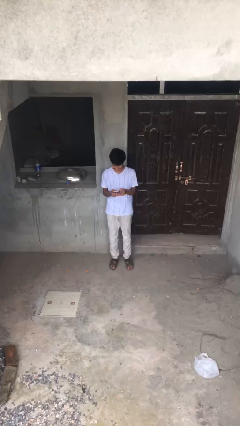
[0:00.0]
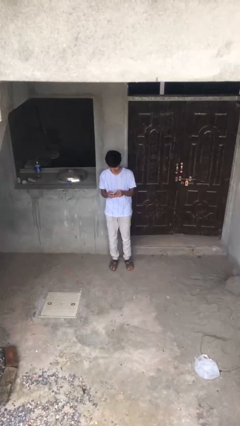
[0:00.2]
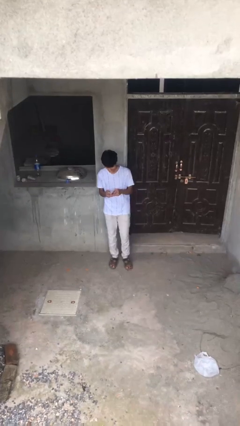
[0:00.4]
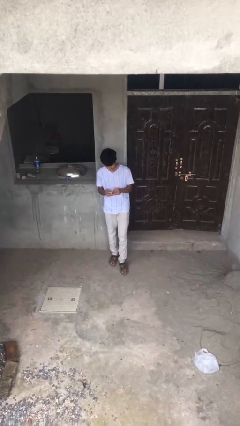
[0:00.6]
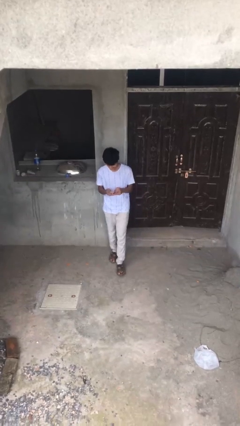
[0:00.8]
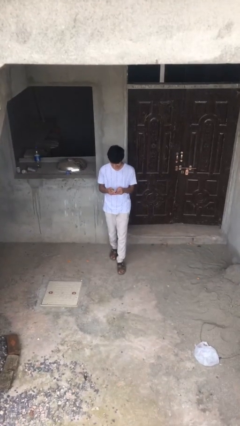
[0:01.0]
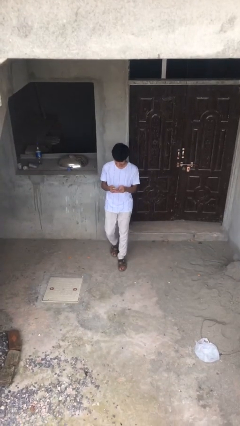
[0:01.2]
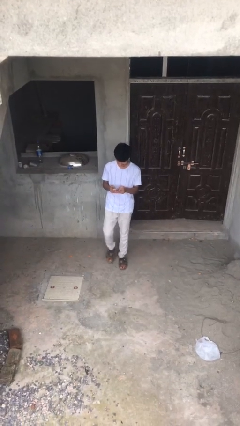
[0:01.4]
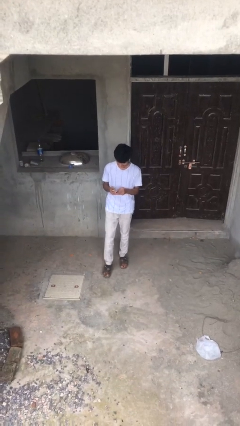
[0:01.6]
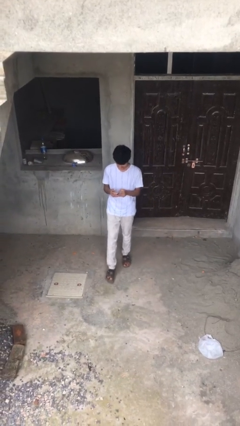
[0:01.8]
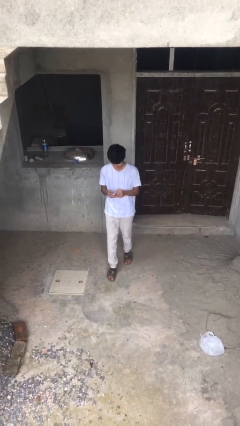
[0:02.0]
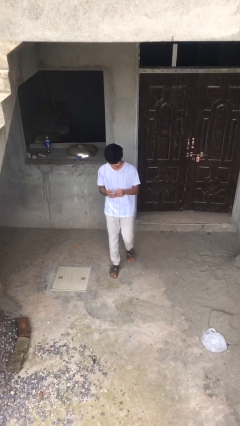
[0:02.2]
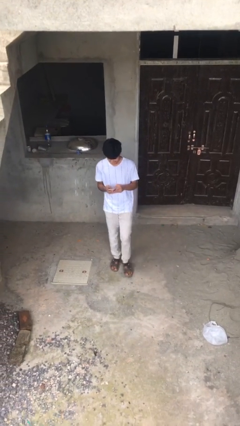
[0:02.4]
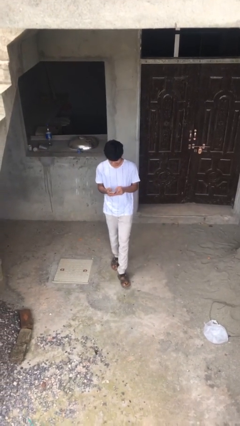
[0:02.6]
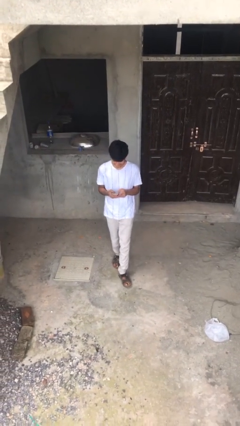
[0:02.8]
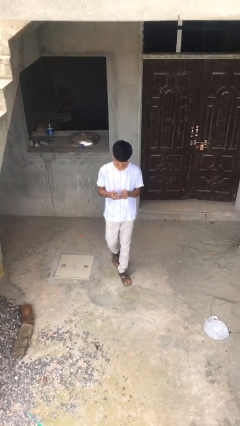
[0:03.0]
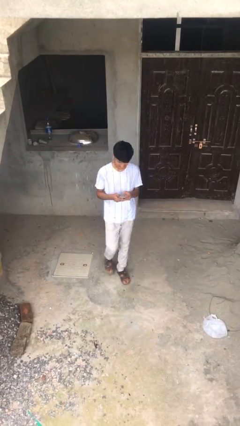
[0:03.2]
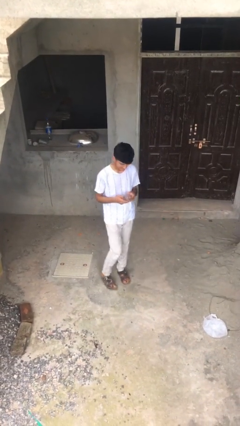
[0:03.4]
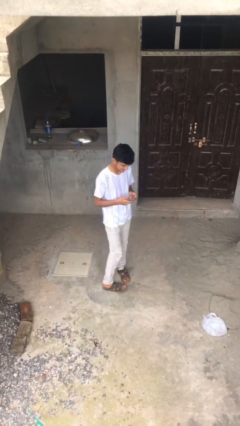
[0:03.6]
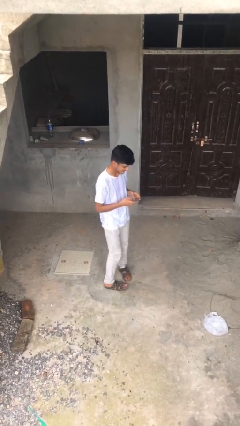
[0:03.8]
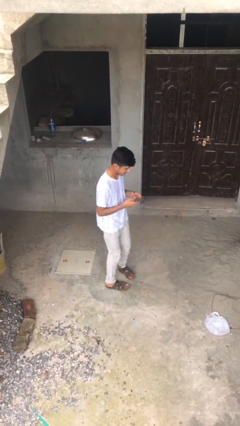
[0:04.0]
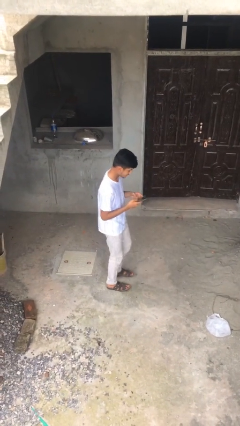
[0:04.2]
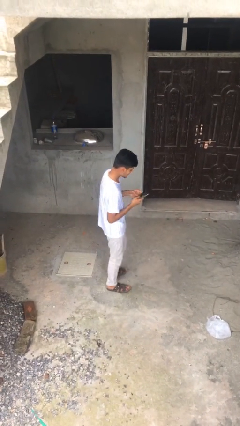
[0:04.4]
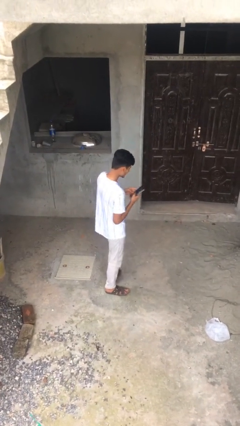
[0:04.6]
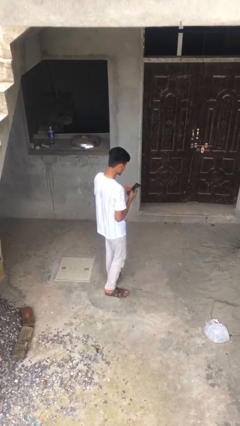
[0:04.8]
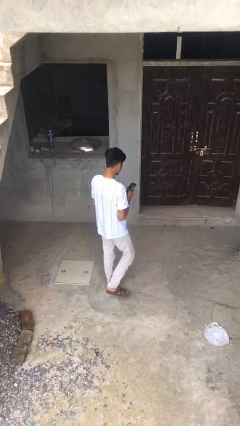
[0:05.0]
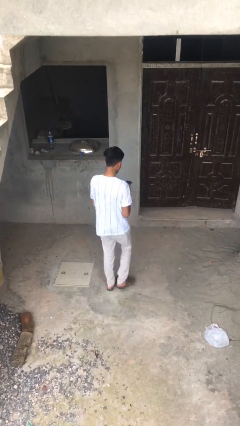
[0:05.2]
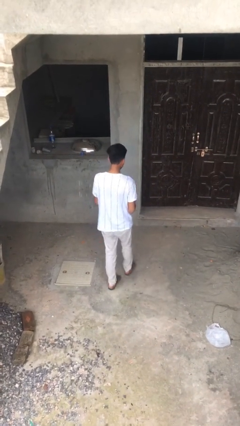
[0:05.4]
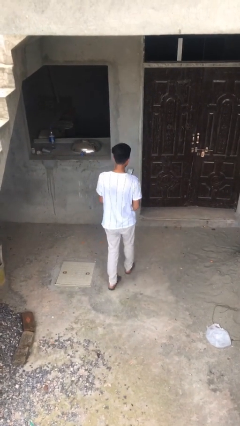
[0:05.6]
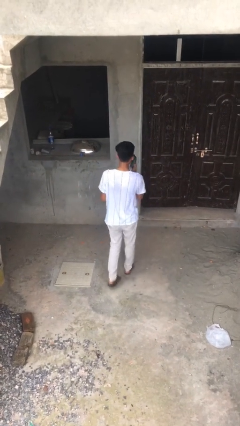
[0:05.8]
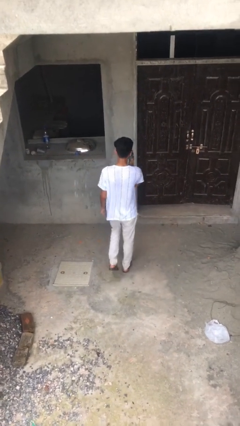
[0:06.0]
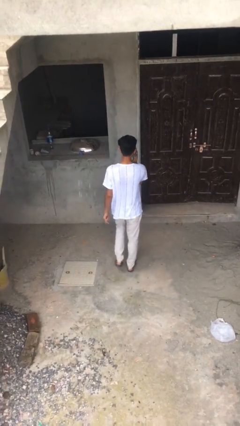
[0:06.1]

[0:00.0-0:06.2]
person texts on phone

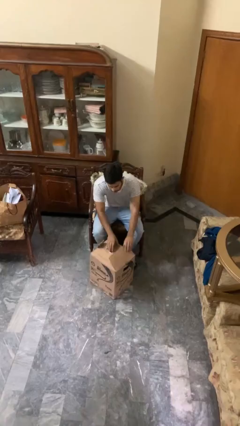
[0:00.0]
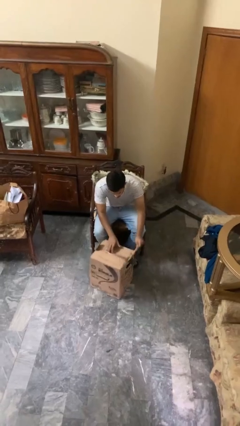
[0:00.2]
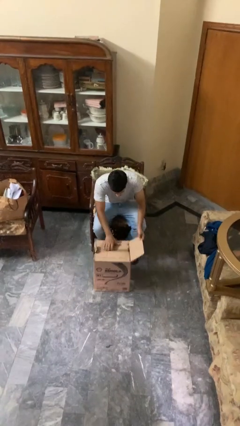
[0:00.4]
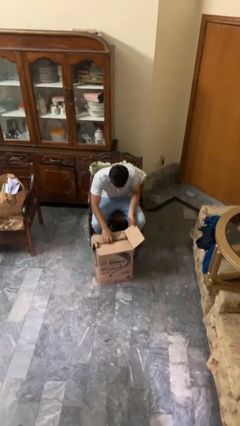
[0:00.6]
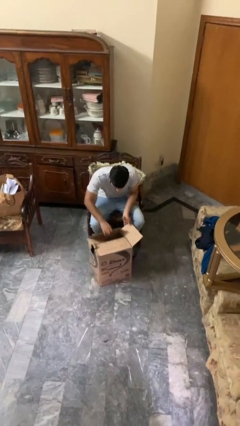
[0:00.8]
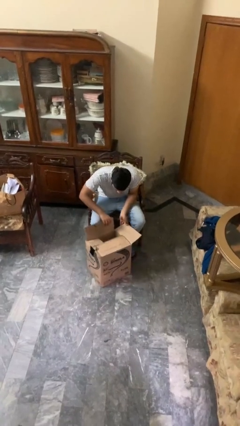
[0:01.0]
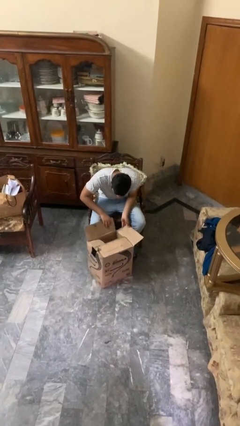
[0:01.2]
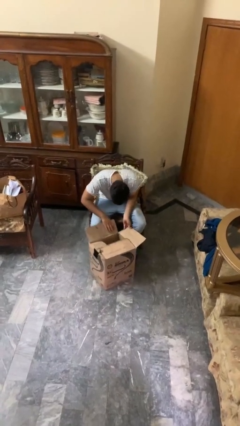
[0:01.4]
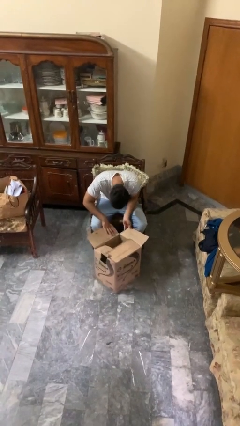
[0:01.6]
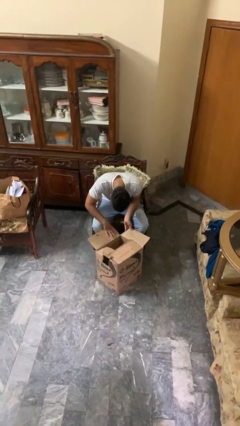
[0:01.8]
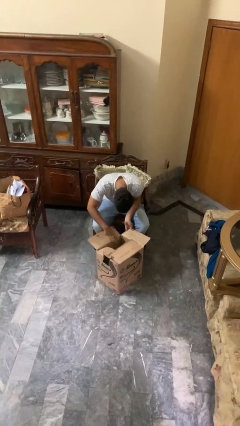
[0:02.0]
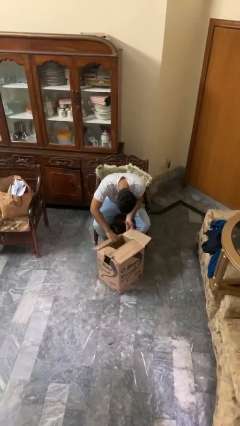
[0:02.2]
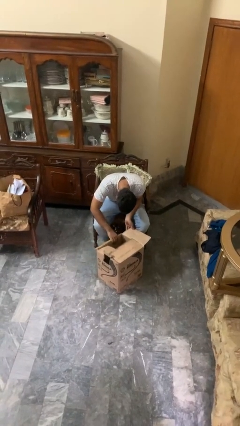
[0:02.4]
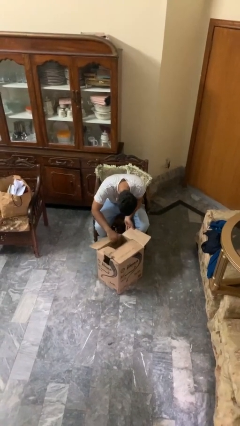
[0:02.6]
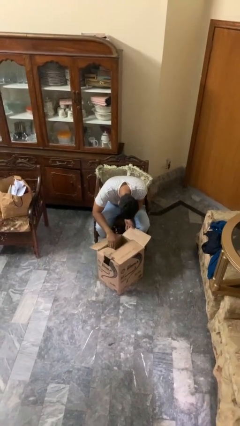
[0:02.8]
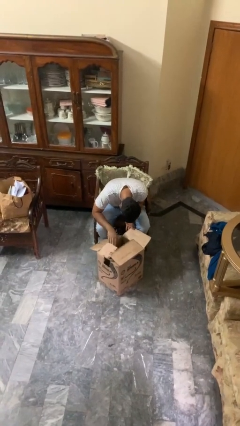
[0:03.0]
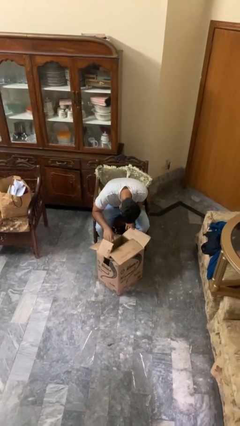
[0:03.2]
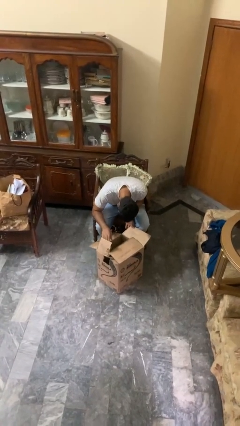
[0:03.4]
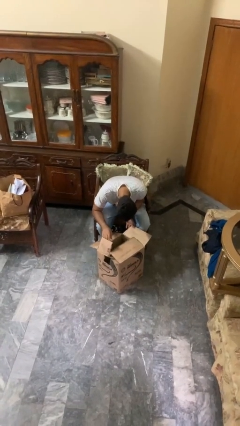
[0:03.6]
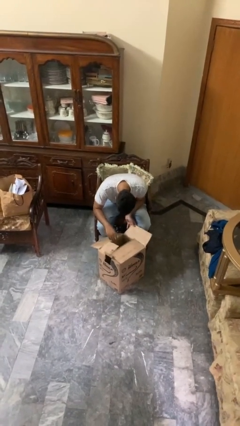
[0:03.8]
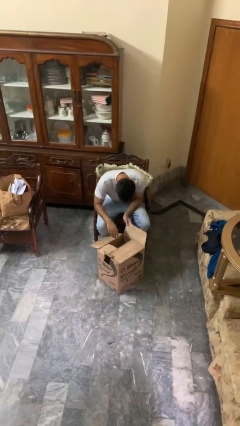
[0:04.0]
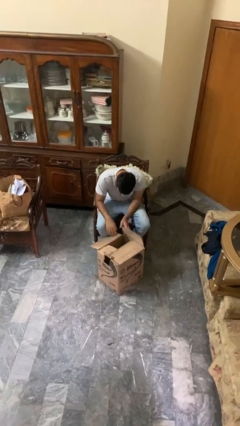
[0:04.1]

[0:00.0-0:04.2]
person searches in box

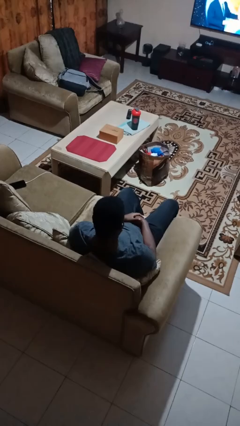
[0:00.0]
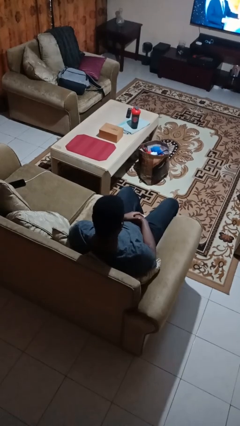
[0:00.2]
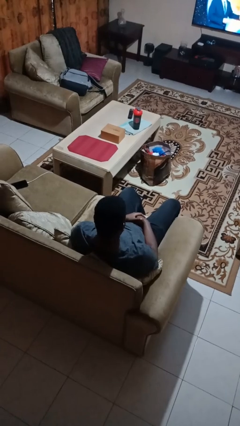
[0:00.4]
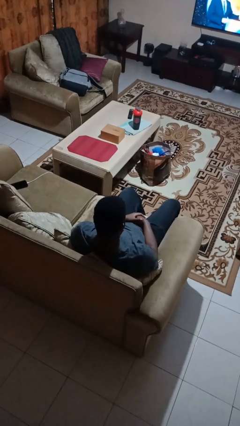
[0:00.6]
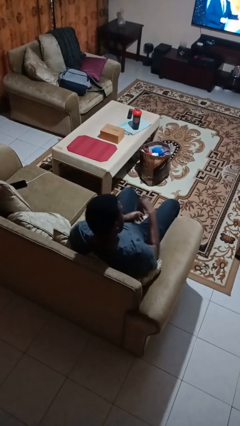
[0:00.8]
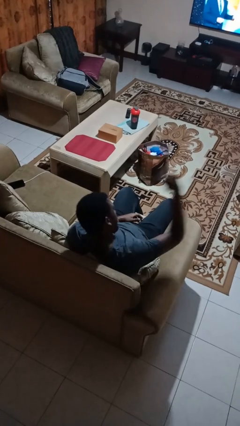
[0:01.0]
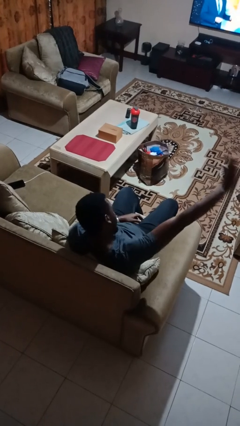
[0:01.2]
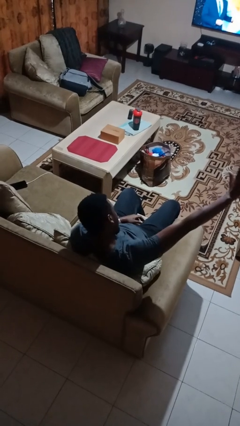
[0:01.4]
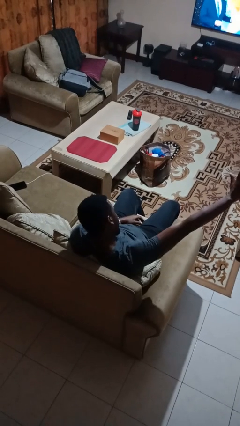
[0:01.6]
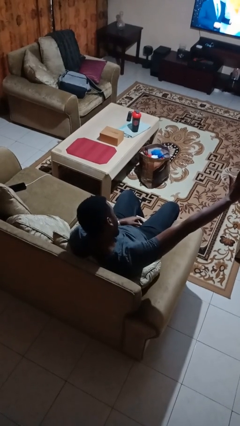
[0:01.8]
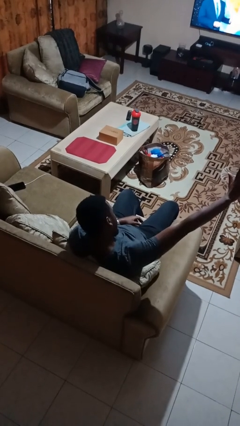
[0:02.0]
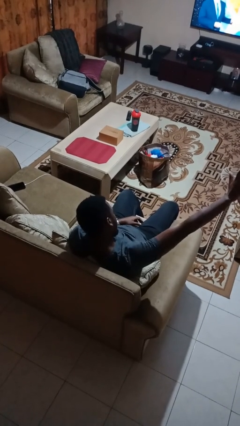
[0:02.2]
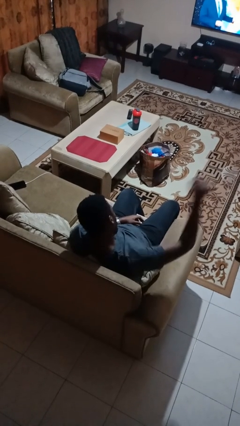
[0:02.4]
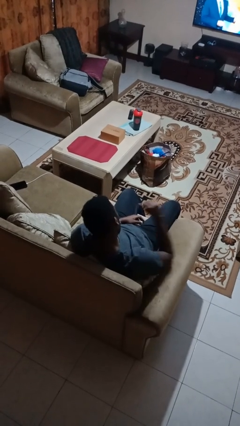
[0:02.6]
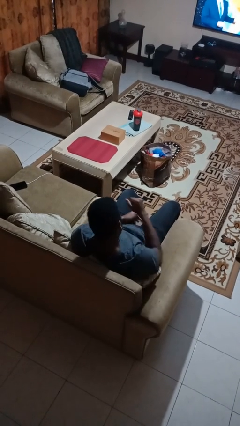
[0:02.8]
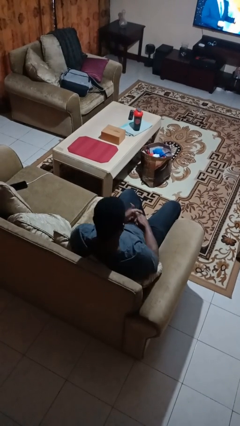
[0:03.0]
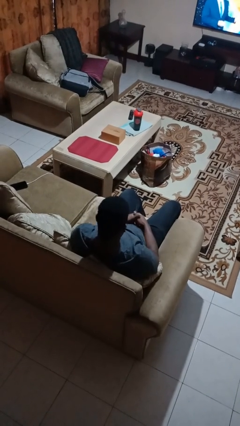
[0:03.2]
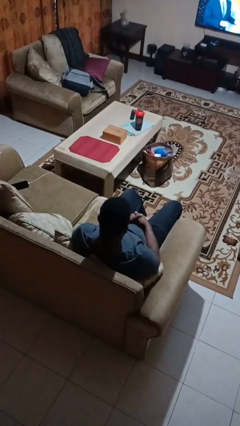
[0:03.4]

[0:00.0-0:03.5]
person gestures stop

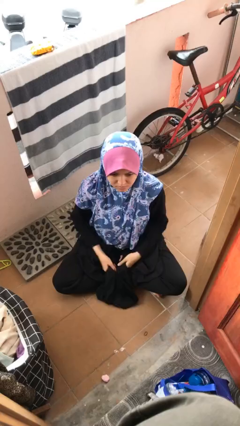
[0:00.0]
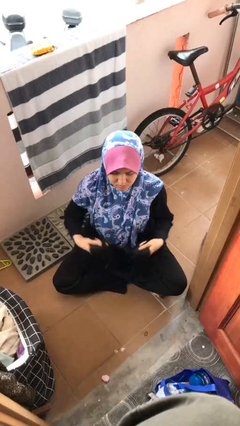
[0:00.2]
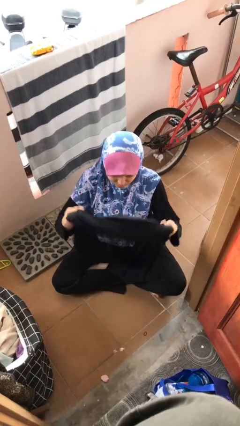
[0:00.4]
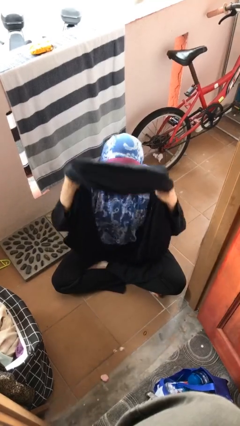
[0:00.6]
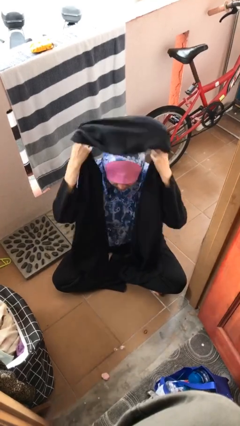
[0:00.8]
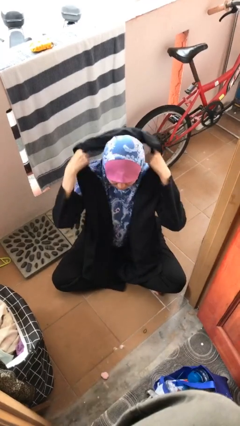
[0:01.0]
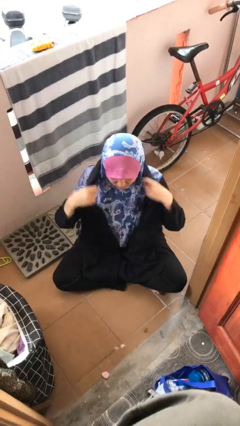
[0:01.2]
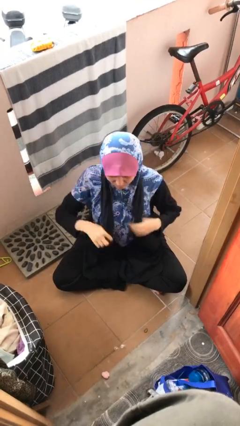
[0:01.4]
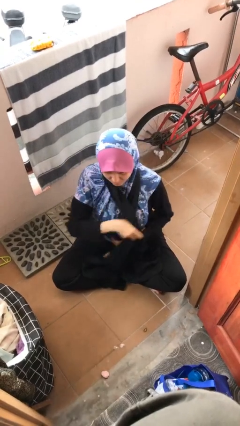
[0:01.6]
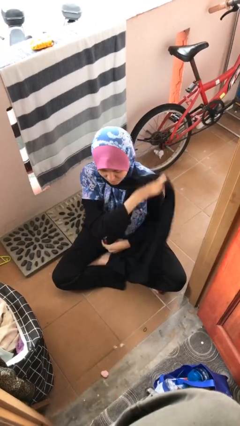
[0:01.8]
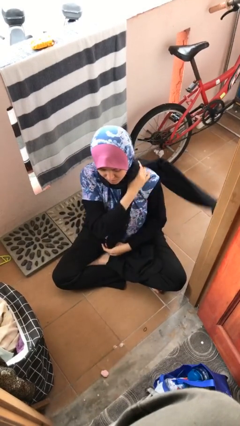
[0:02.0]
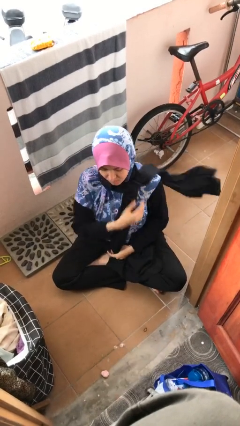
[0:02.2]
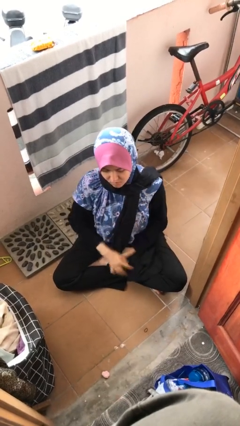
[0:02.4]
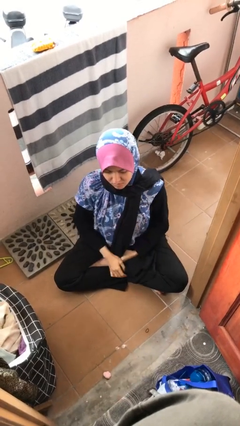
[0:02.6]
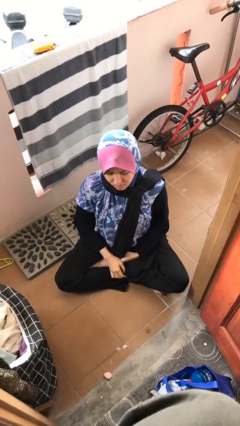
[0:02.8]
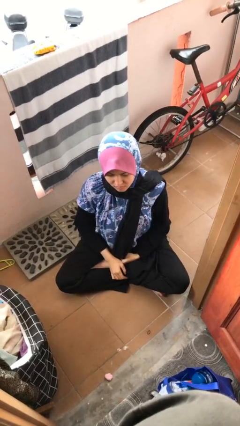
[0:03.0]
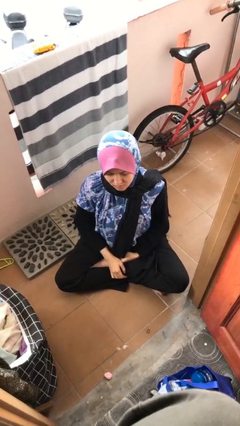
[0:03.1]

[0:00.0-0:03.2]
person puts on scarf

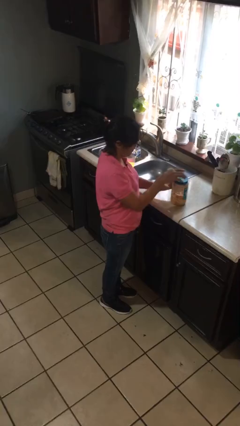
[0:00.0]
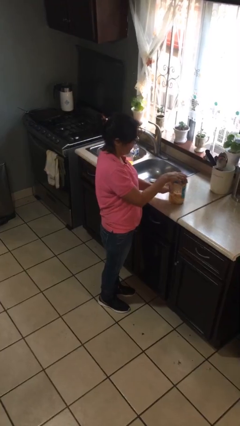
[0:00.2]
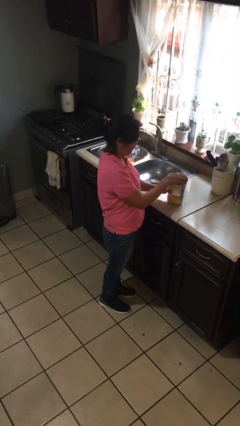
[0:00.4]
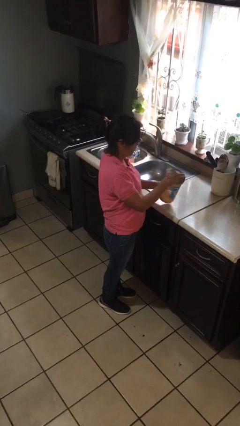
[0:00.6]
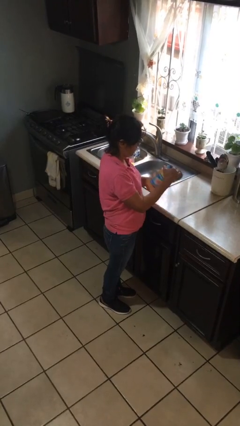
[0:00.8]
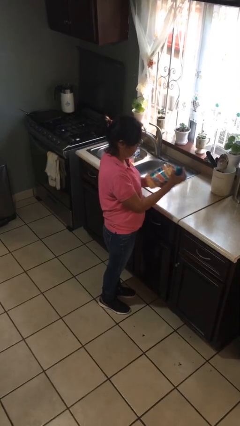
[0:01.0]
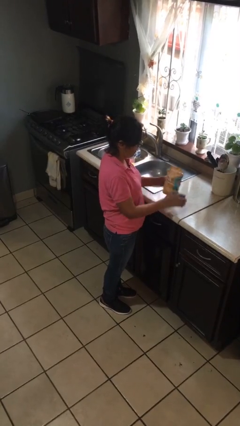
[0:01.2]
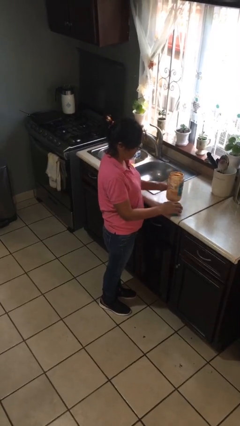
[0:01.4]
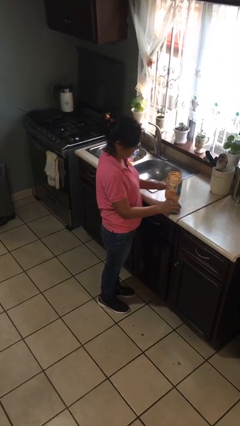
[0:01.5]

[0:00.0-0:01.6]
person opens jar
